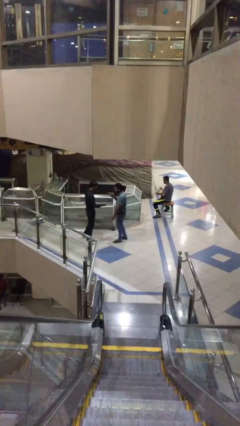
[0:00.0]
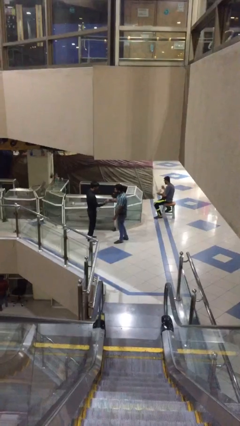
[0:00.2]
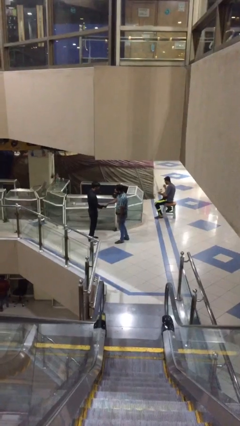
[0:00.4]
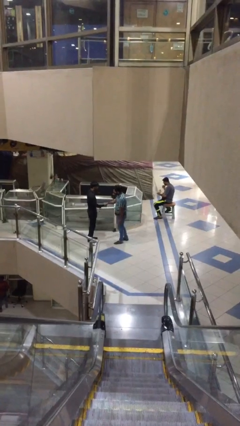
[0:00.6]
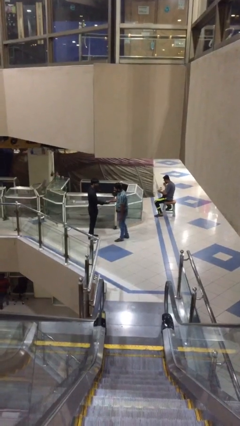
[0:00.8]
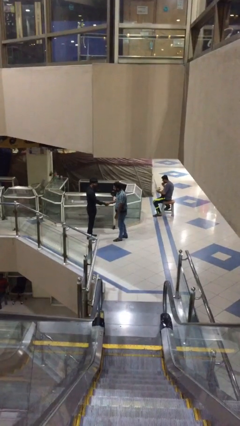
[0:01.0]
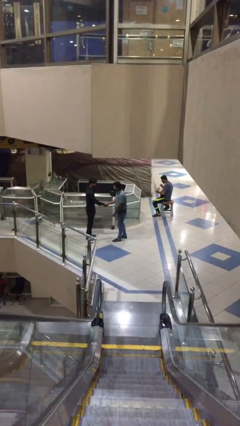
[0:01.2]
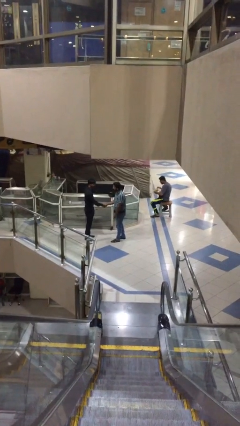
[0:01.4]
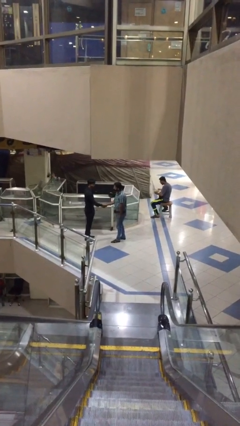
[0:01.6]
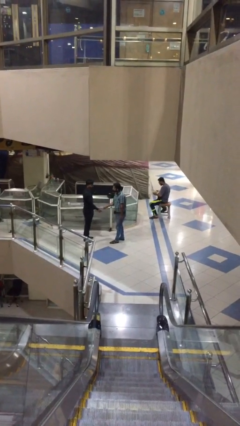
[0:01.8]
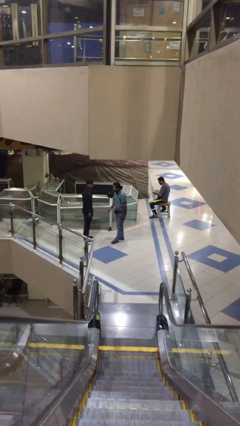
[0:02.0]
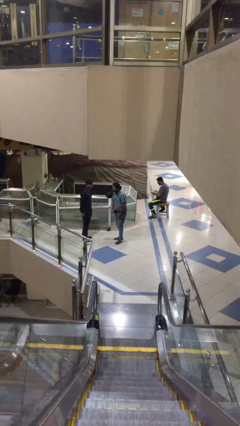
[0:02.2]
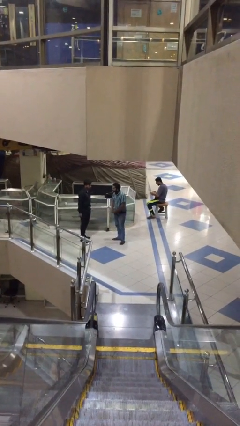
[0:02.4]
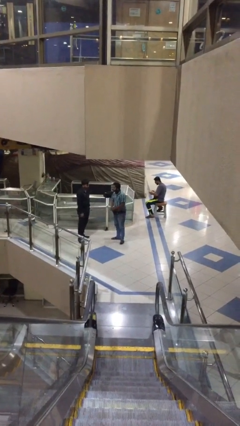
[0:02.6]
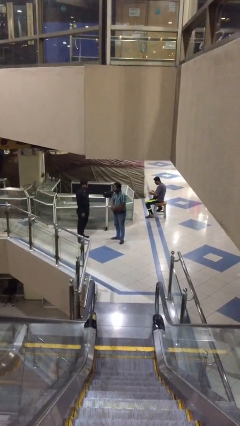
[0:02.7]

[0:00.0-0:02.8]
person shakes hand

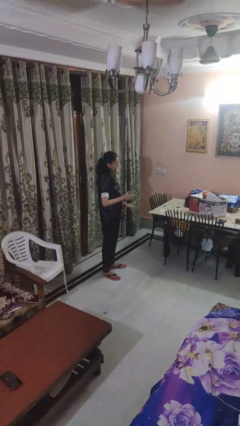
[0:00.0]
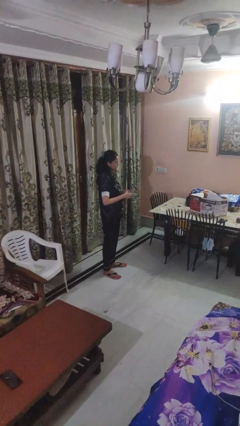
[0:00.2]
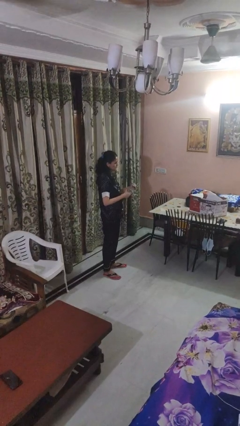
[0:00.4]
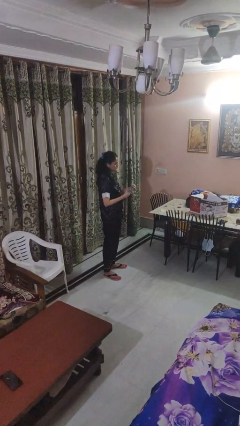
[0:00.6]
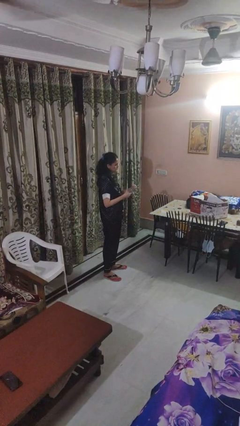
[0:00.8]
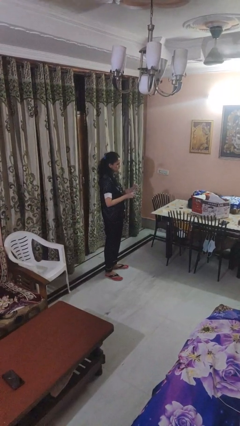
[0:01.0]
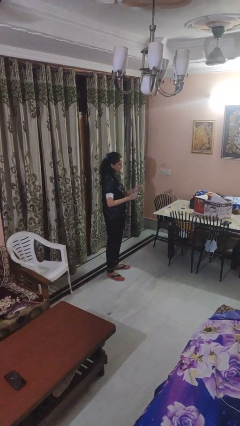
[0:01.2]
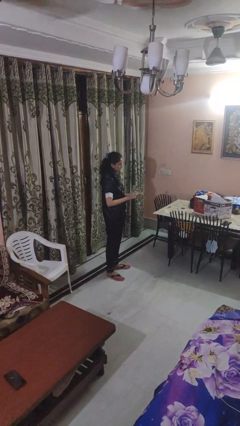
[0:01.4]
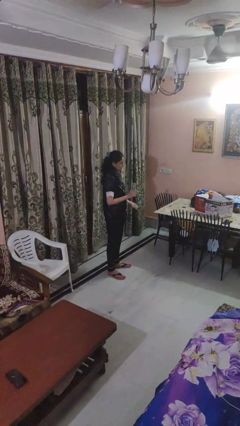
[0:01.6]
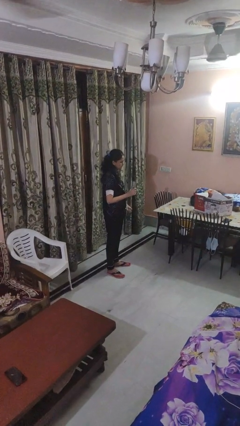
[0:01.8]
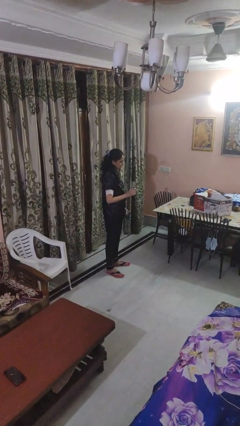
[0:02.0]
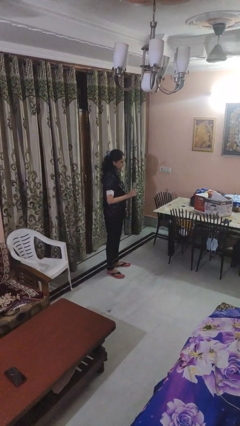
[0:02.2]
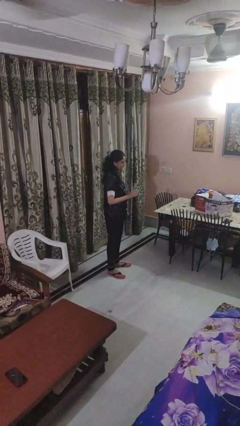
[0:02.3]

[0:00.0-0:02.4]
person unscrews lid from bottle

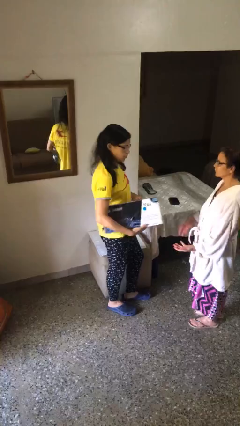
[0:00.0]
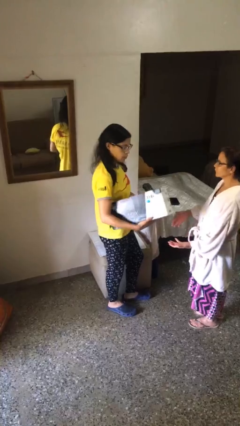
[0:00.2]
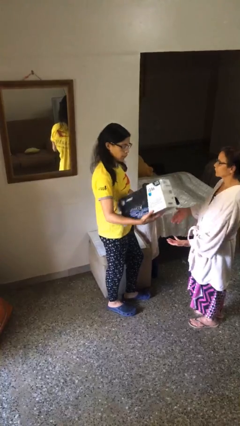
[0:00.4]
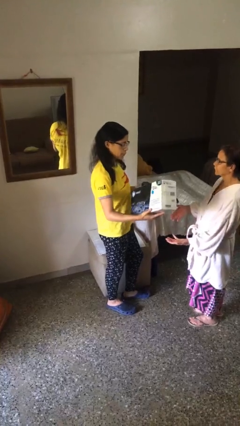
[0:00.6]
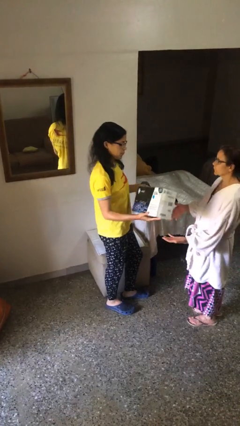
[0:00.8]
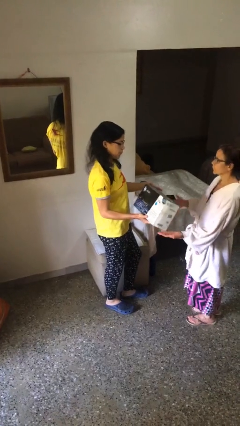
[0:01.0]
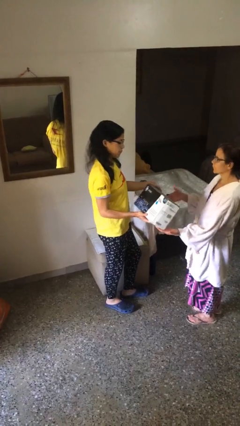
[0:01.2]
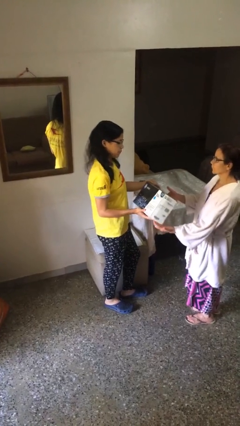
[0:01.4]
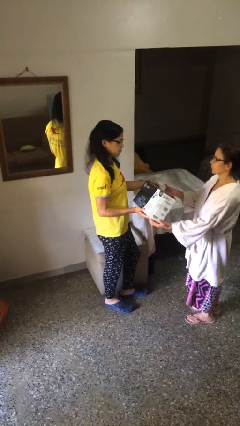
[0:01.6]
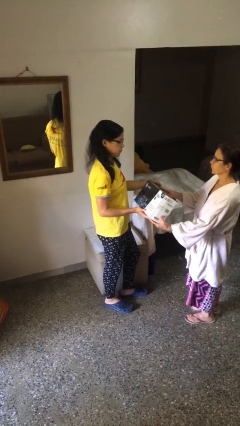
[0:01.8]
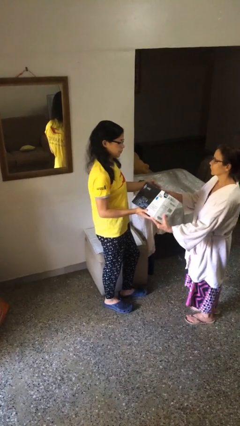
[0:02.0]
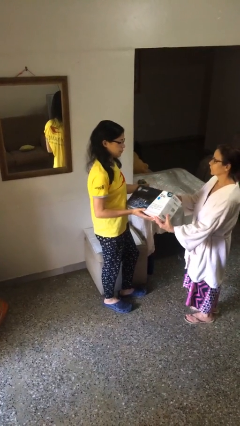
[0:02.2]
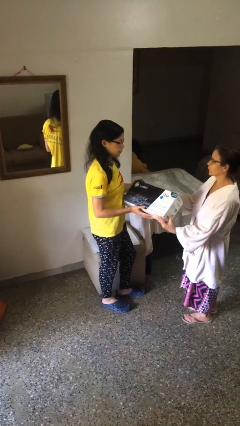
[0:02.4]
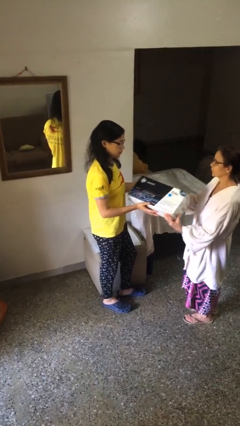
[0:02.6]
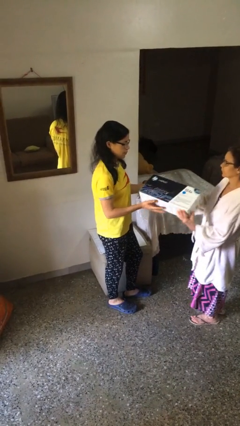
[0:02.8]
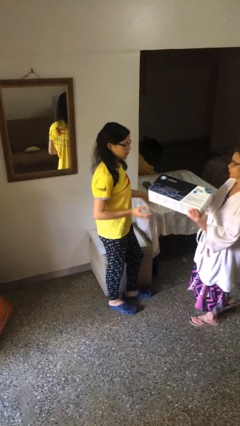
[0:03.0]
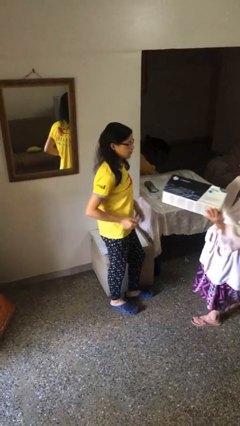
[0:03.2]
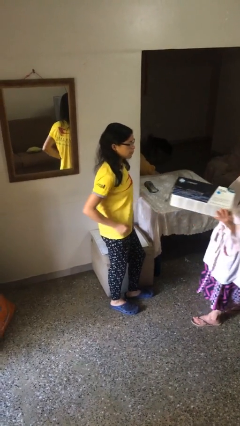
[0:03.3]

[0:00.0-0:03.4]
person transfers object to person

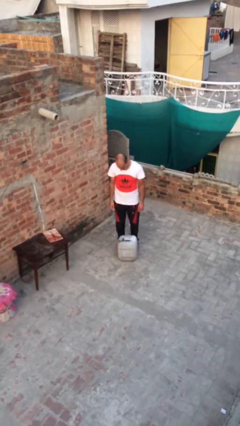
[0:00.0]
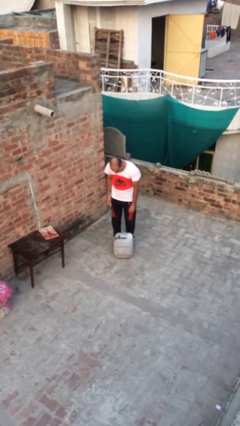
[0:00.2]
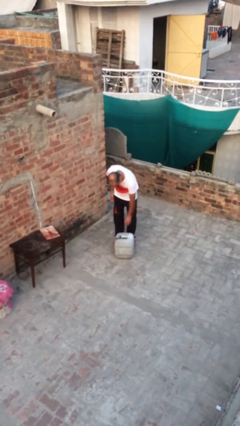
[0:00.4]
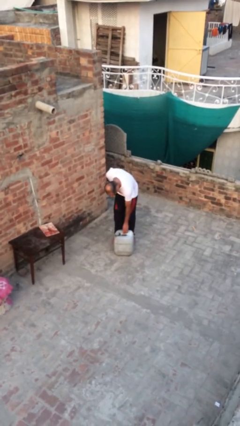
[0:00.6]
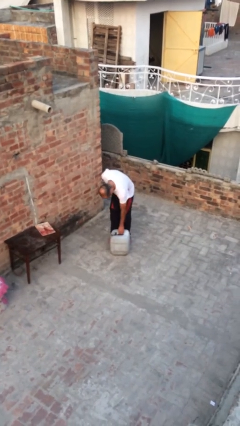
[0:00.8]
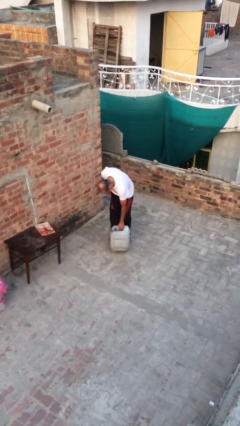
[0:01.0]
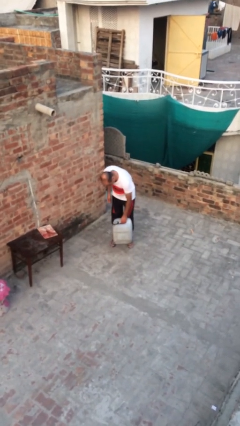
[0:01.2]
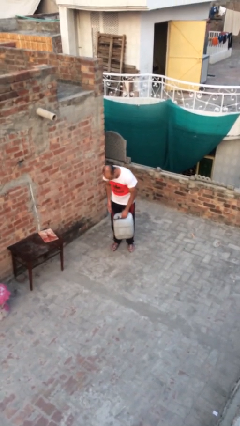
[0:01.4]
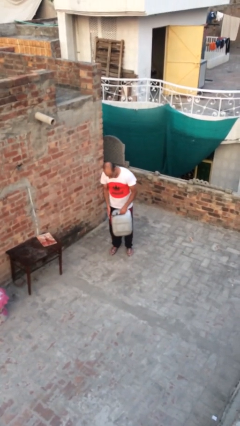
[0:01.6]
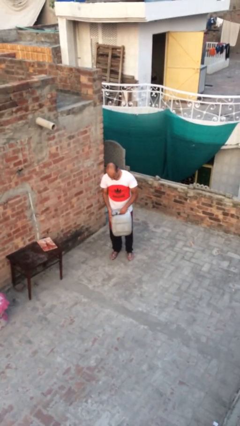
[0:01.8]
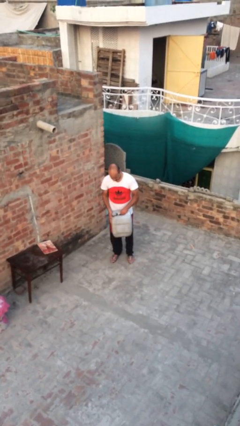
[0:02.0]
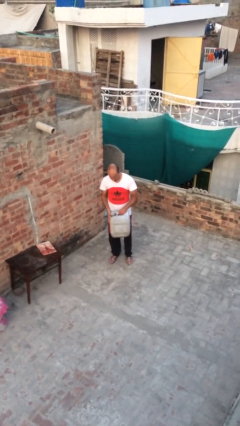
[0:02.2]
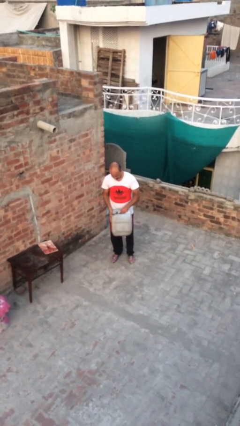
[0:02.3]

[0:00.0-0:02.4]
person picks up object from floor

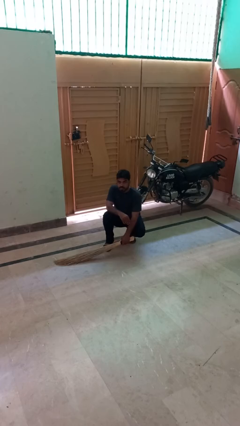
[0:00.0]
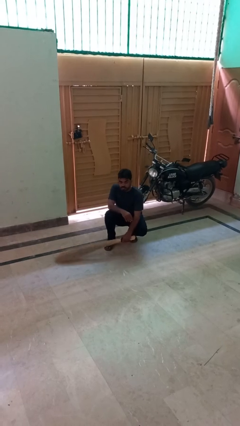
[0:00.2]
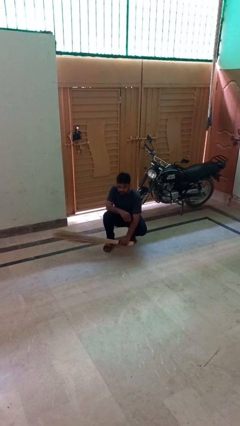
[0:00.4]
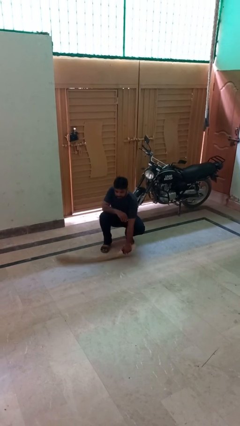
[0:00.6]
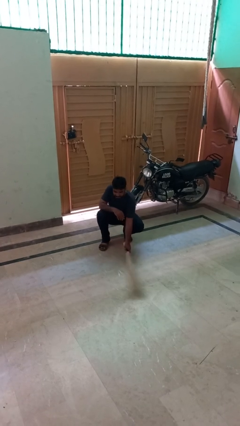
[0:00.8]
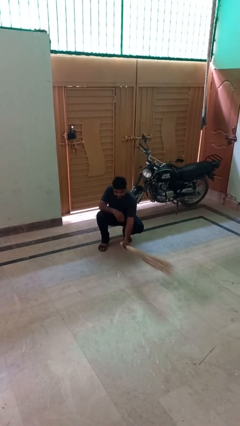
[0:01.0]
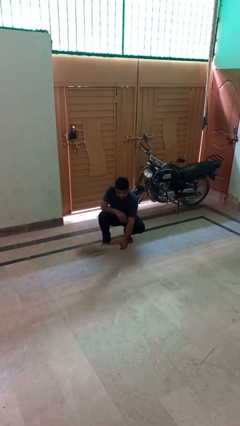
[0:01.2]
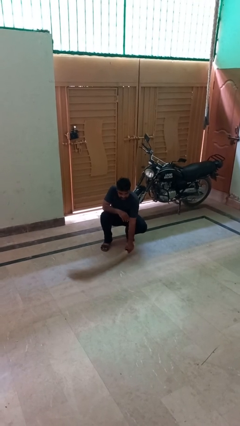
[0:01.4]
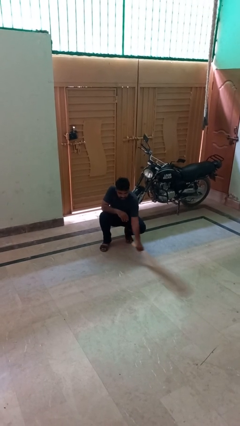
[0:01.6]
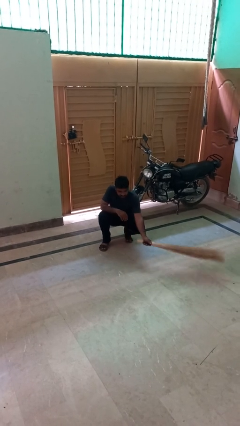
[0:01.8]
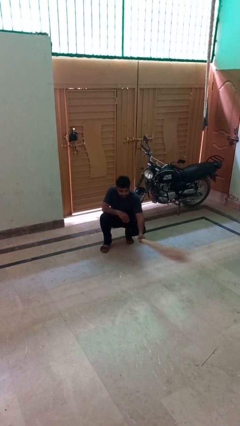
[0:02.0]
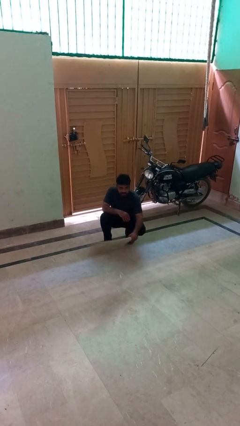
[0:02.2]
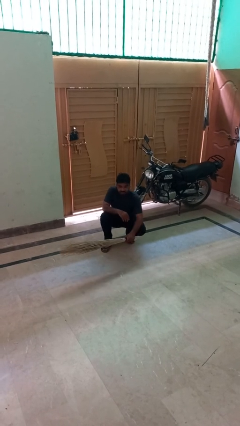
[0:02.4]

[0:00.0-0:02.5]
person sweeps floor

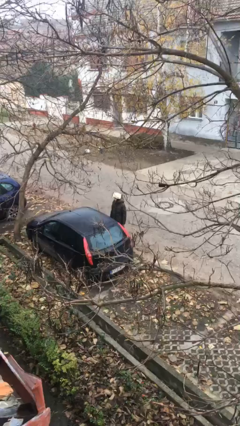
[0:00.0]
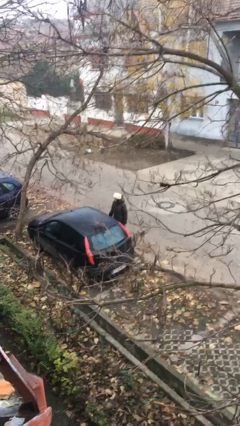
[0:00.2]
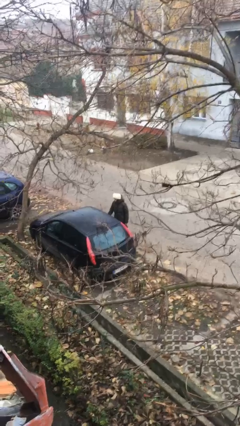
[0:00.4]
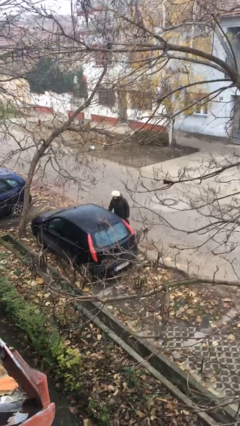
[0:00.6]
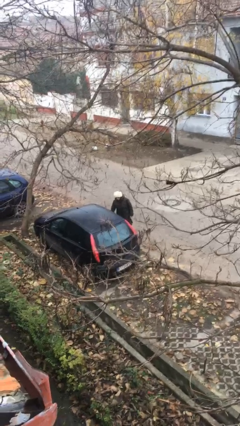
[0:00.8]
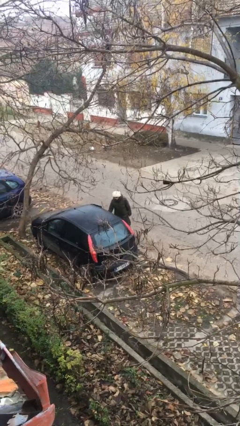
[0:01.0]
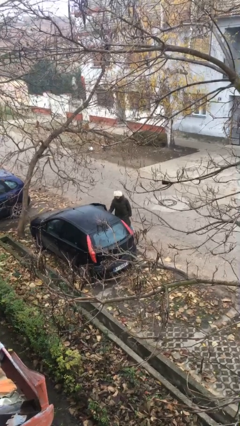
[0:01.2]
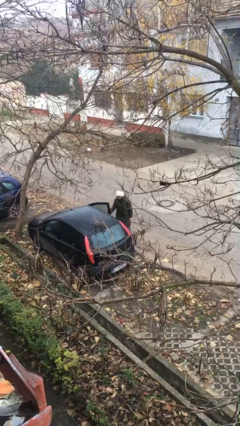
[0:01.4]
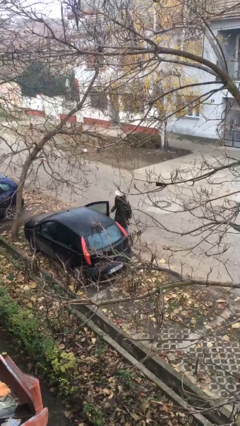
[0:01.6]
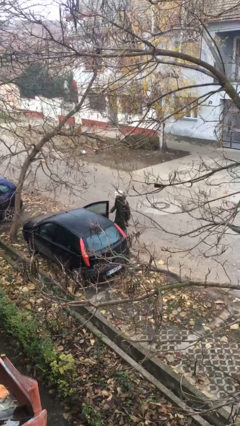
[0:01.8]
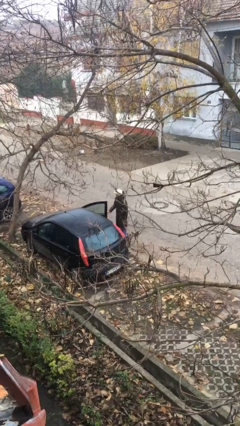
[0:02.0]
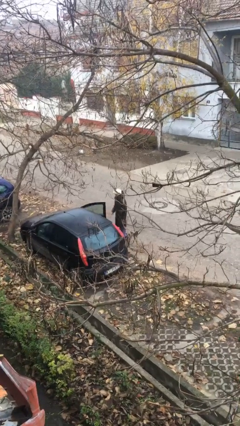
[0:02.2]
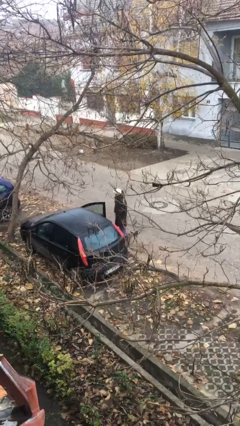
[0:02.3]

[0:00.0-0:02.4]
person opens car door

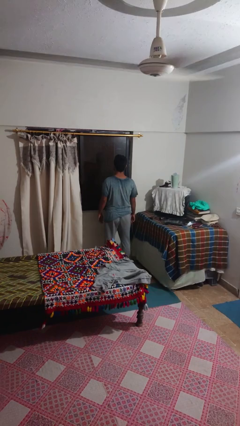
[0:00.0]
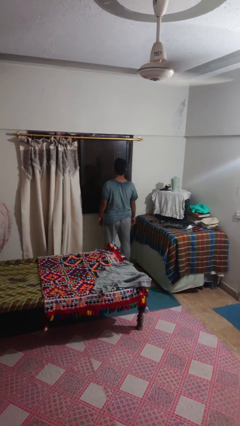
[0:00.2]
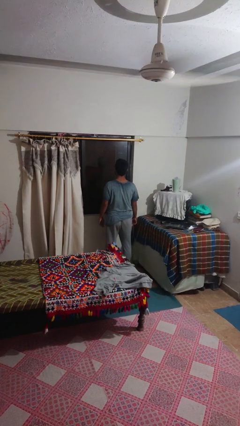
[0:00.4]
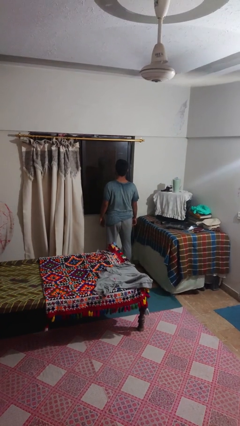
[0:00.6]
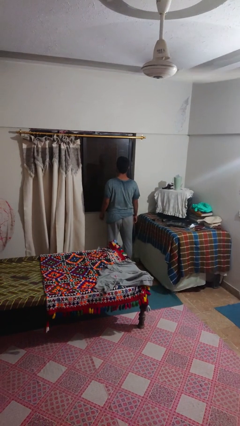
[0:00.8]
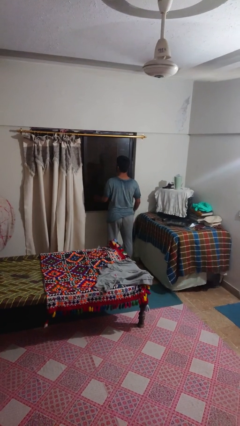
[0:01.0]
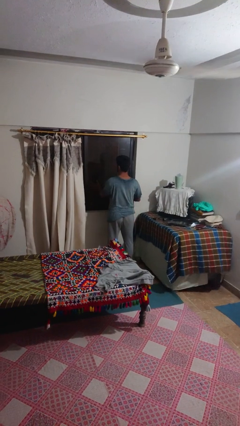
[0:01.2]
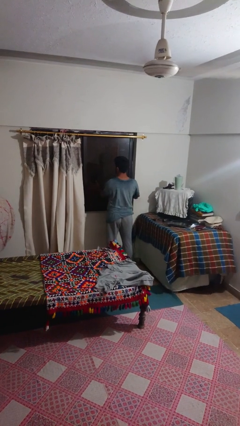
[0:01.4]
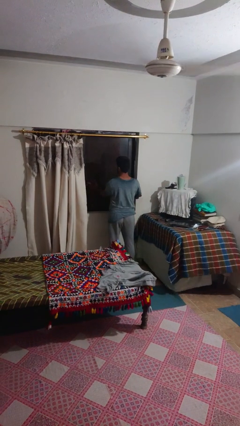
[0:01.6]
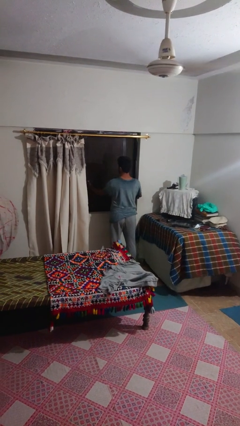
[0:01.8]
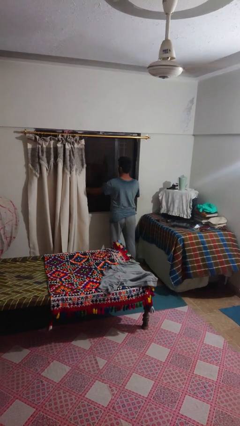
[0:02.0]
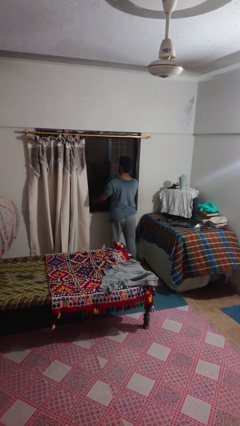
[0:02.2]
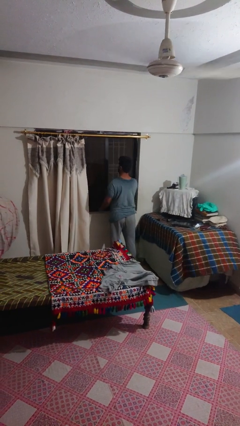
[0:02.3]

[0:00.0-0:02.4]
person opens home window
